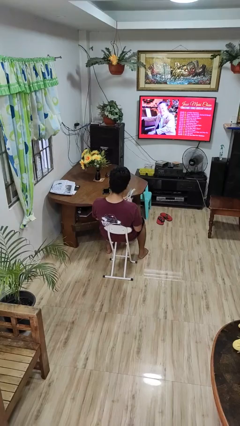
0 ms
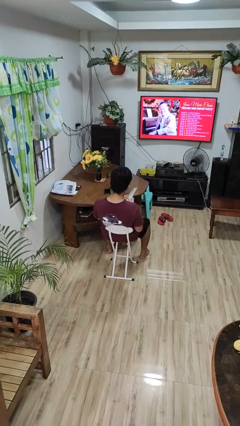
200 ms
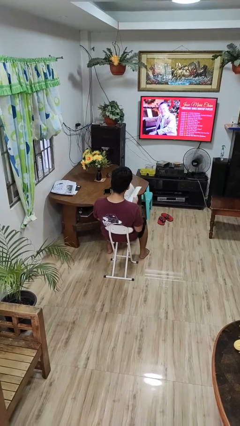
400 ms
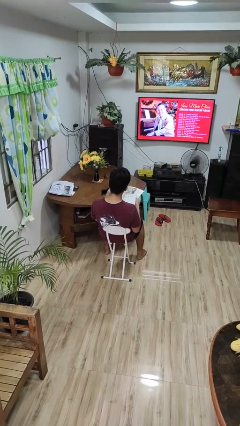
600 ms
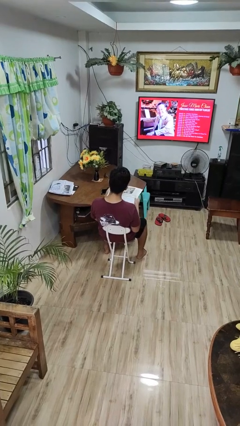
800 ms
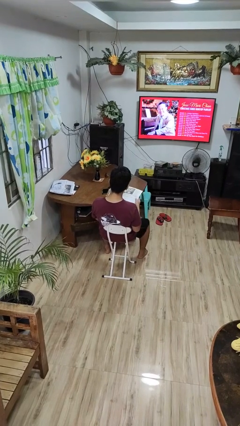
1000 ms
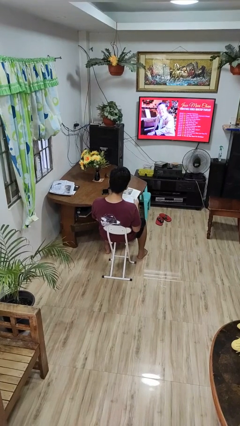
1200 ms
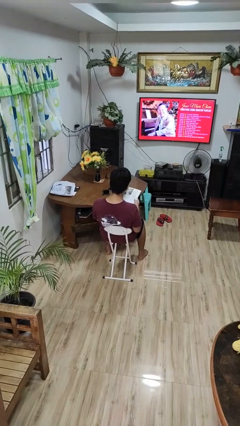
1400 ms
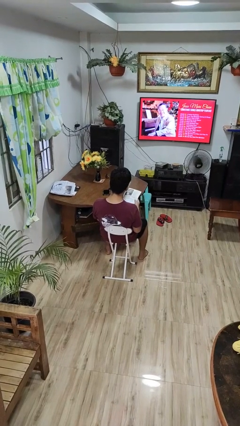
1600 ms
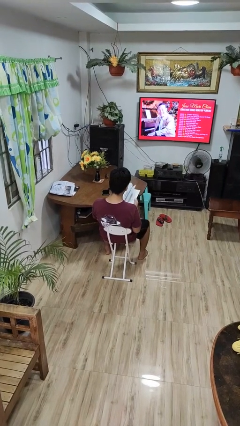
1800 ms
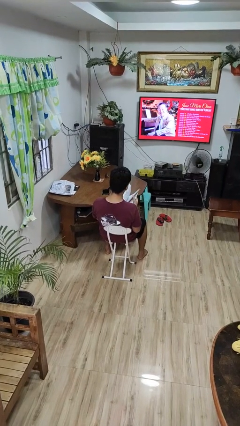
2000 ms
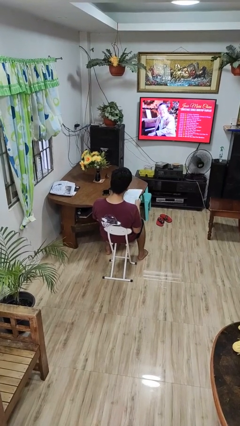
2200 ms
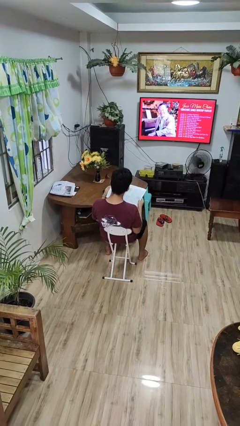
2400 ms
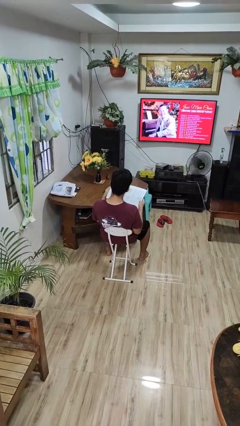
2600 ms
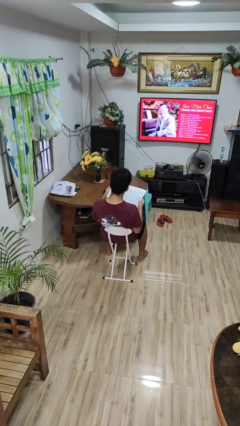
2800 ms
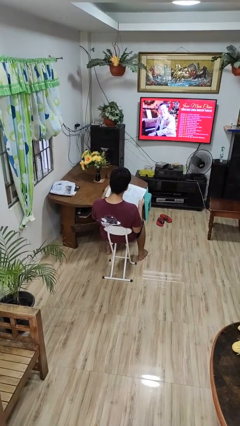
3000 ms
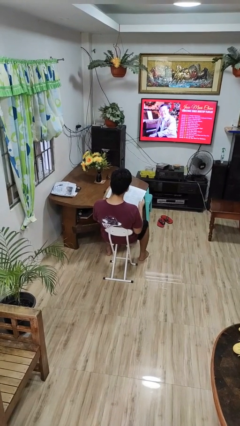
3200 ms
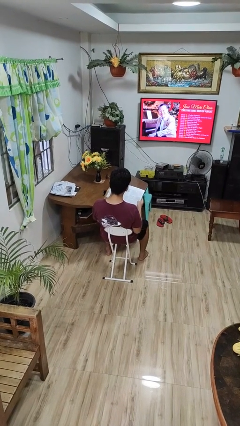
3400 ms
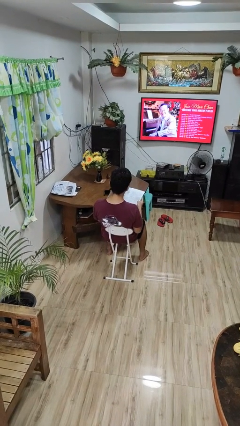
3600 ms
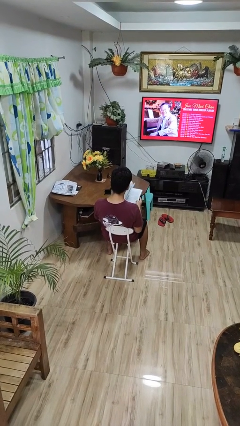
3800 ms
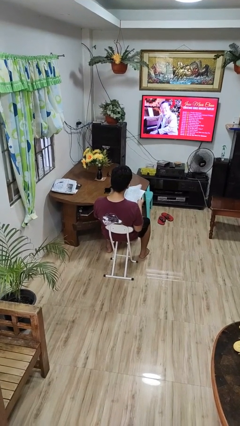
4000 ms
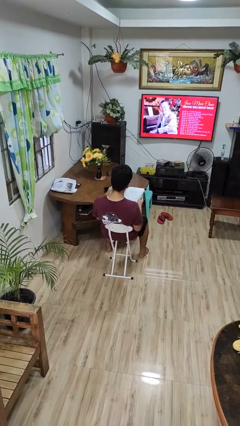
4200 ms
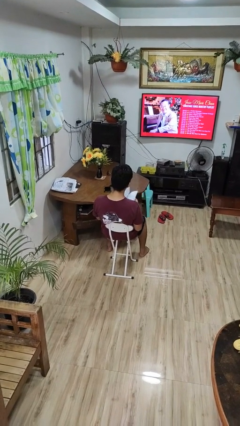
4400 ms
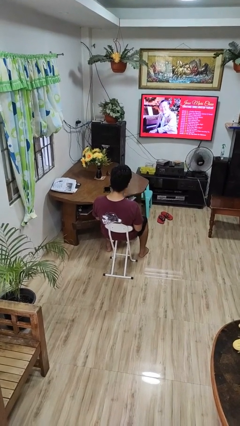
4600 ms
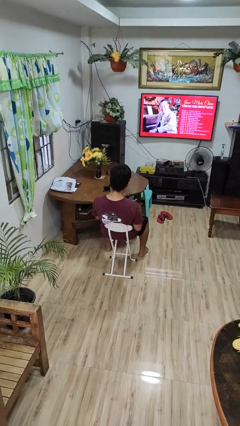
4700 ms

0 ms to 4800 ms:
person reads magazine

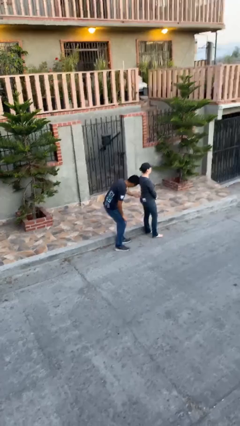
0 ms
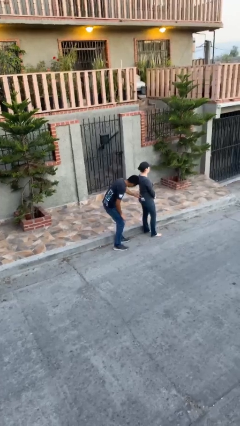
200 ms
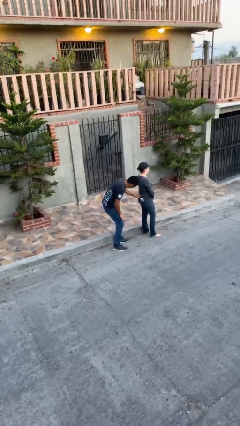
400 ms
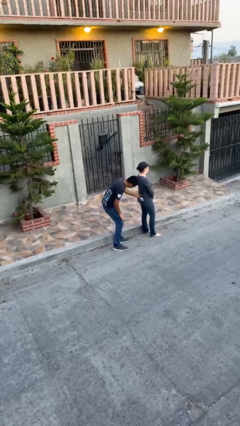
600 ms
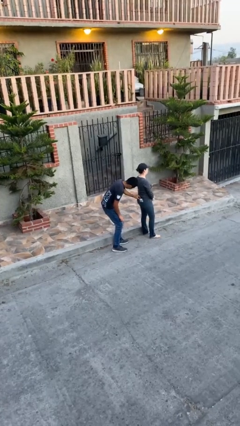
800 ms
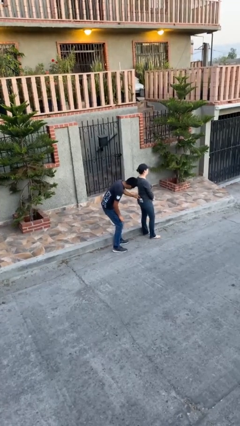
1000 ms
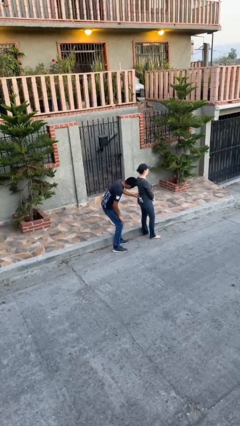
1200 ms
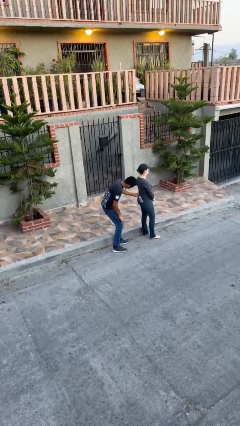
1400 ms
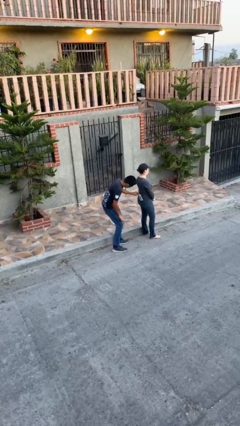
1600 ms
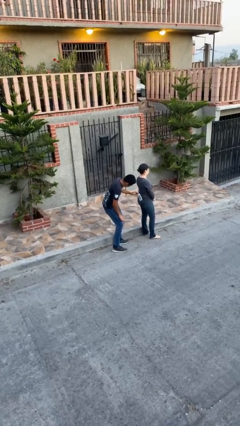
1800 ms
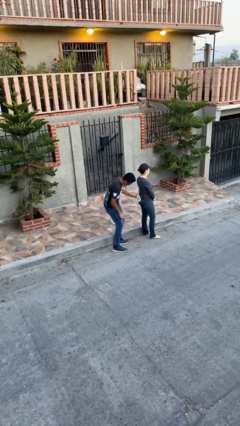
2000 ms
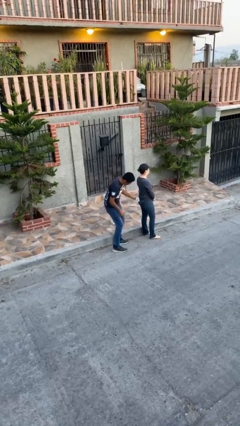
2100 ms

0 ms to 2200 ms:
person steals object from person

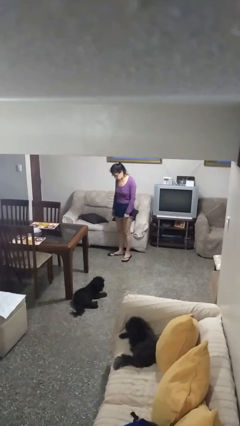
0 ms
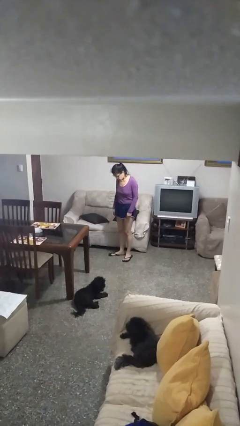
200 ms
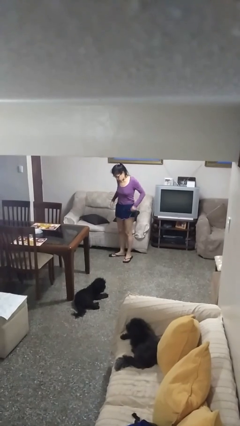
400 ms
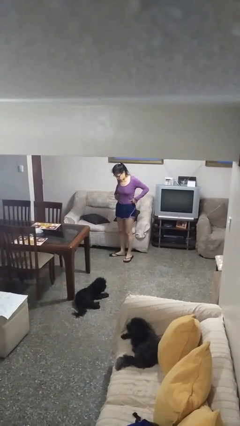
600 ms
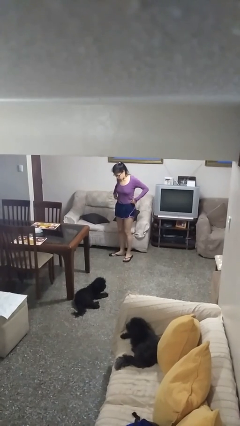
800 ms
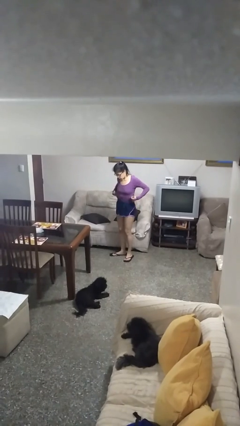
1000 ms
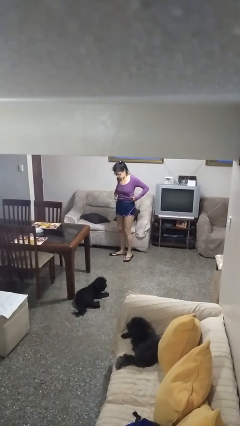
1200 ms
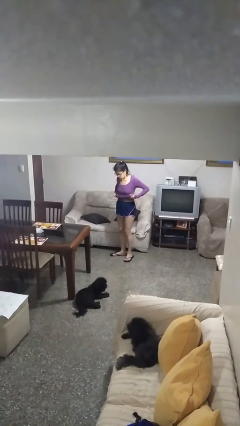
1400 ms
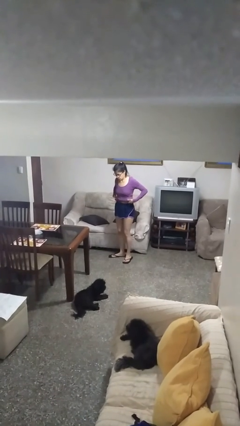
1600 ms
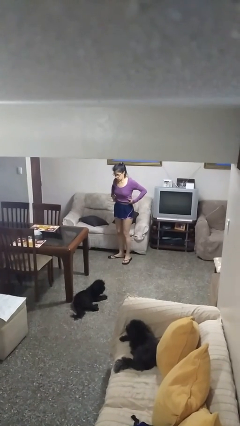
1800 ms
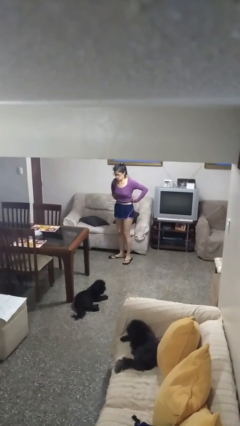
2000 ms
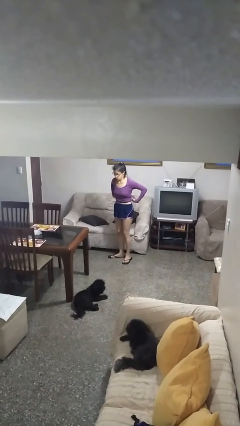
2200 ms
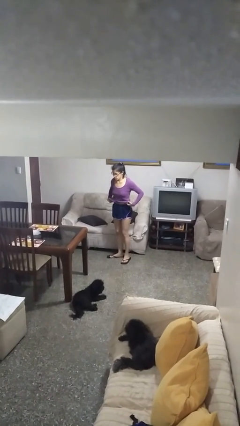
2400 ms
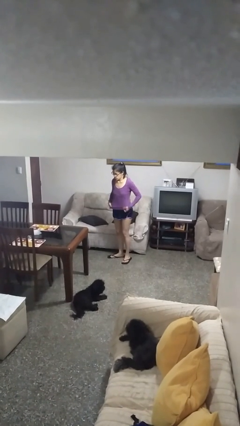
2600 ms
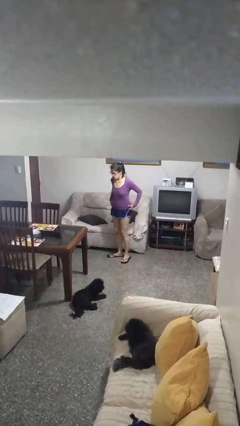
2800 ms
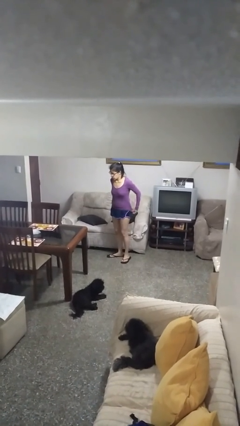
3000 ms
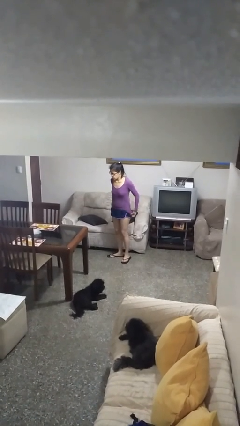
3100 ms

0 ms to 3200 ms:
person untucks shirt

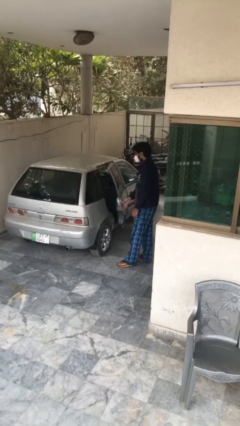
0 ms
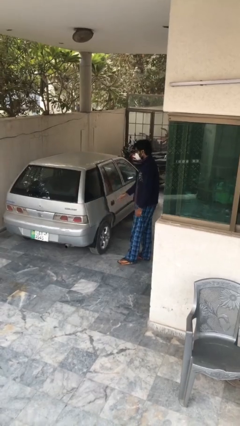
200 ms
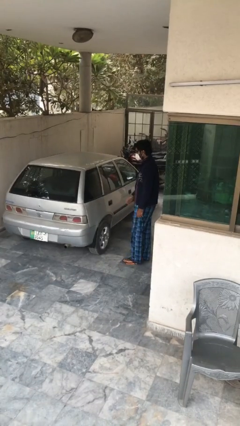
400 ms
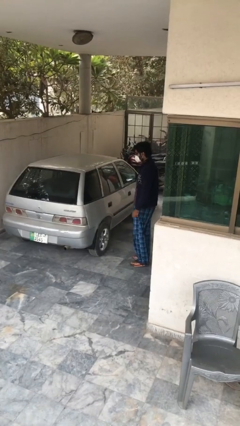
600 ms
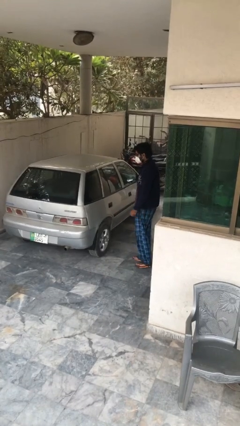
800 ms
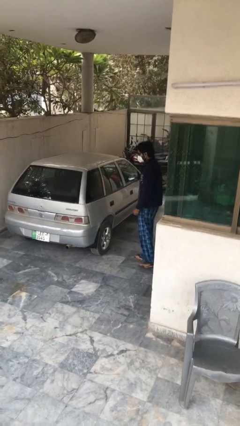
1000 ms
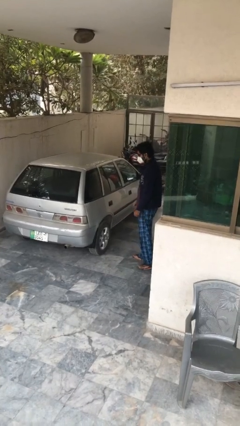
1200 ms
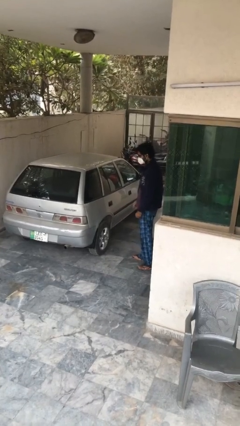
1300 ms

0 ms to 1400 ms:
person closes car door

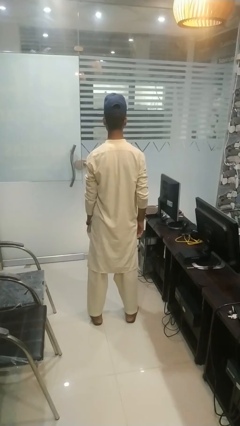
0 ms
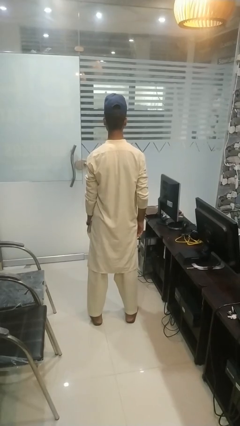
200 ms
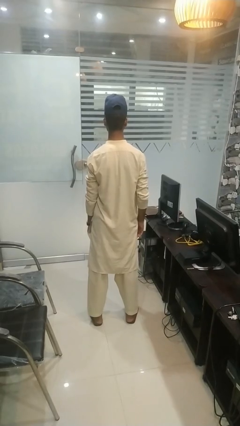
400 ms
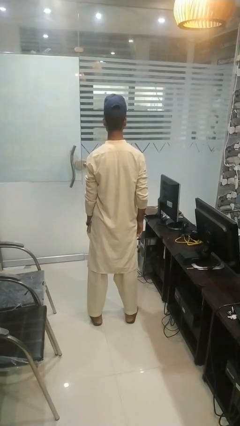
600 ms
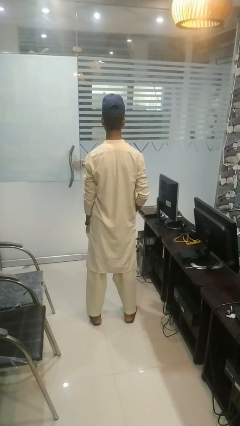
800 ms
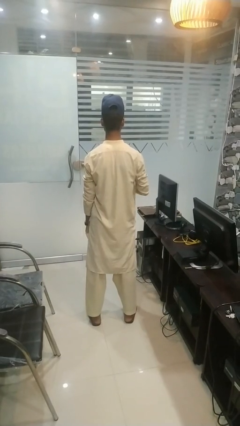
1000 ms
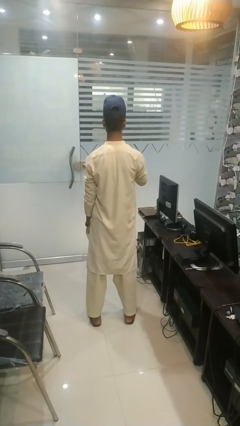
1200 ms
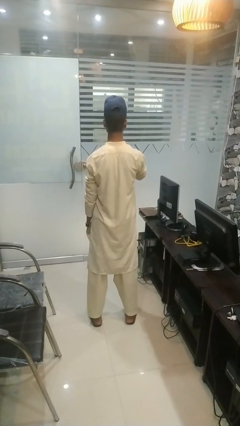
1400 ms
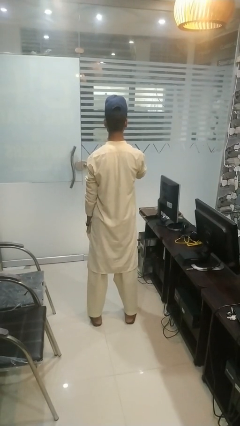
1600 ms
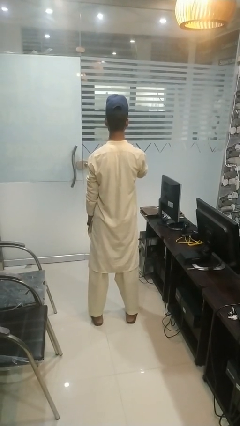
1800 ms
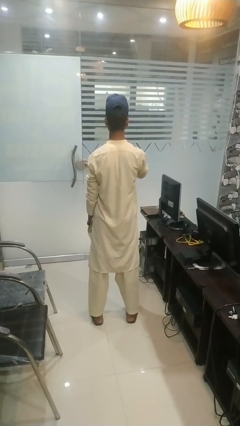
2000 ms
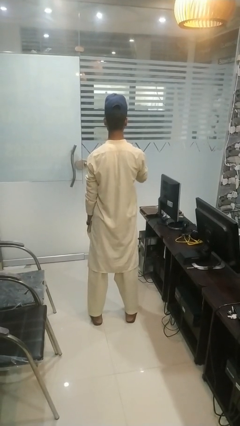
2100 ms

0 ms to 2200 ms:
person gestures be quiet

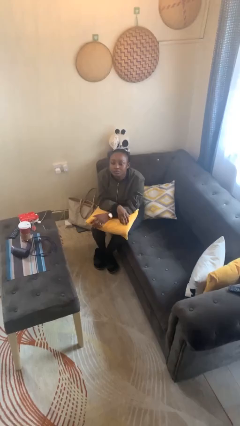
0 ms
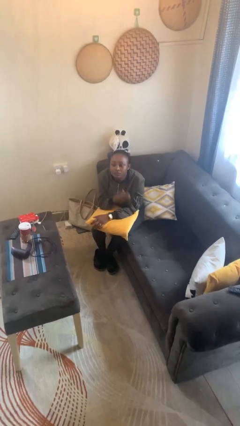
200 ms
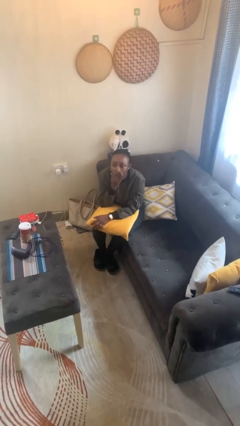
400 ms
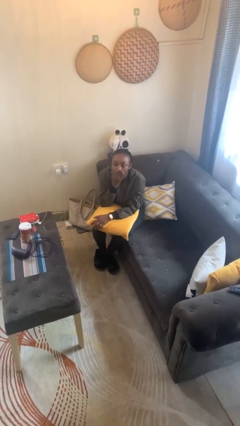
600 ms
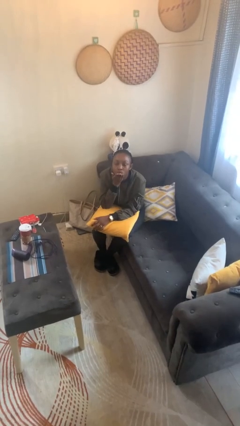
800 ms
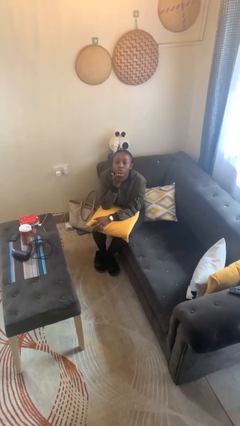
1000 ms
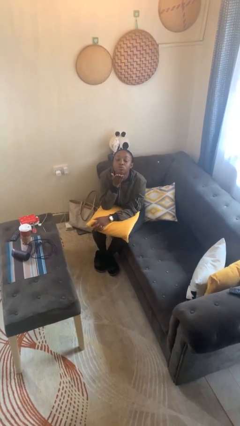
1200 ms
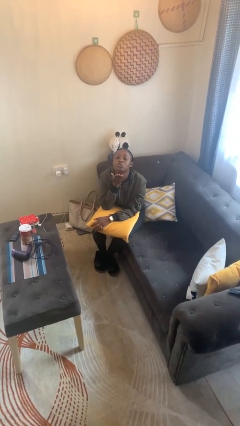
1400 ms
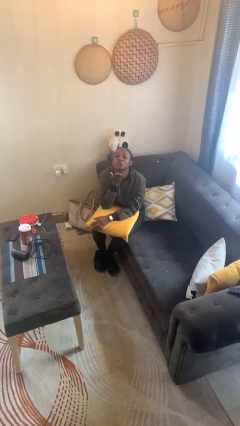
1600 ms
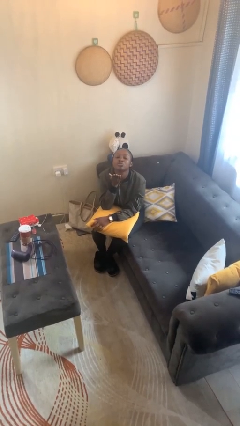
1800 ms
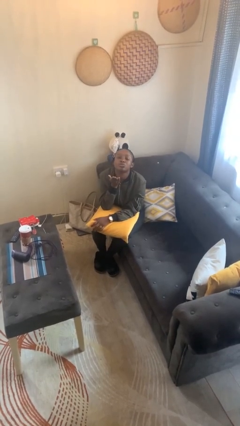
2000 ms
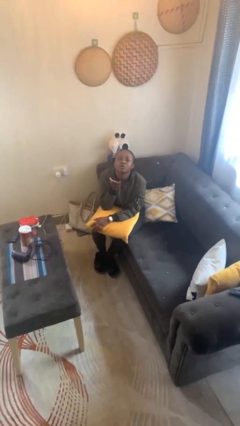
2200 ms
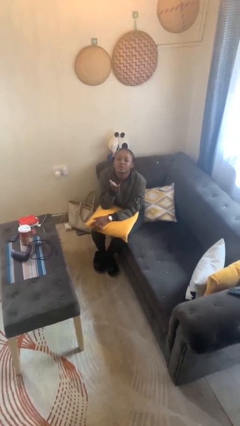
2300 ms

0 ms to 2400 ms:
person gestures blow kiss

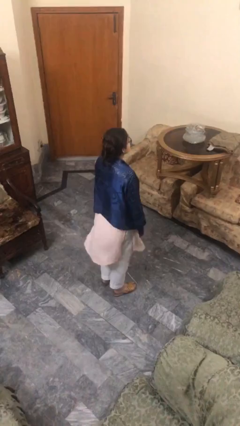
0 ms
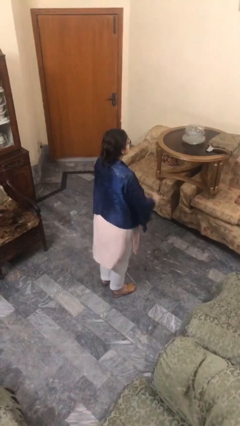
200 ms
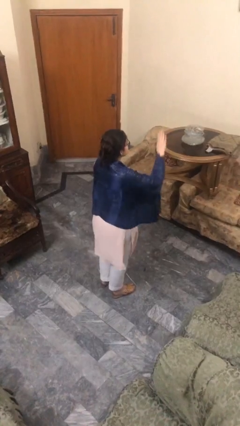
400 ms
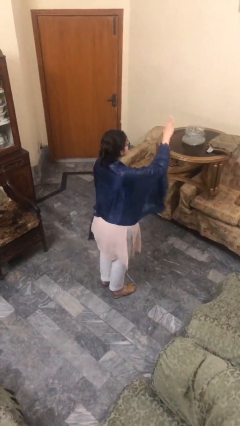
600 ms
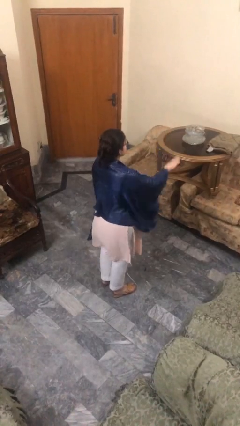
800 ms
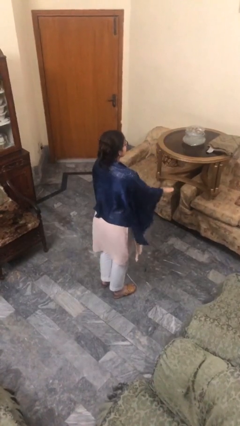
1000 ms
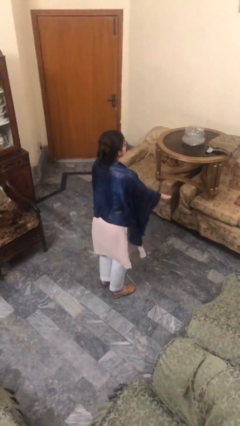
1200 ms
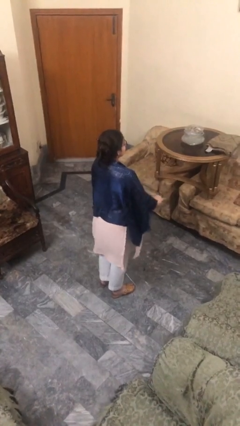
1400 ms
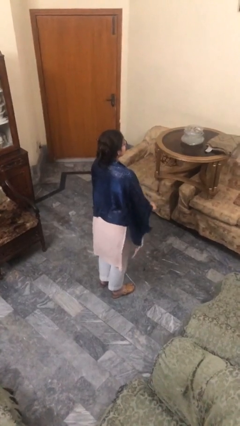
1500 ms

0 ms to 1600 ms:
person gestures swipe down
